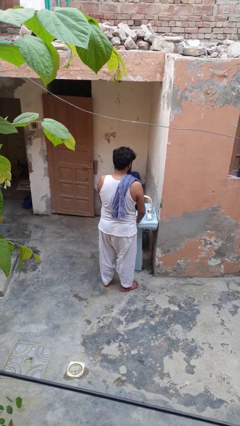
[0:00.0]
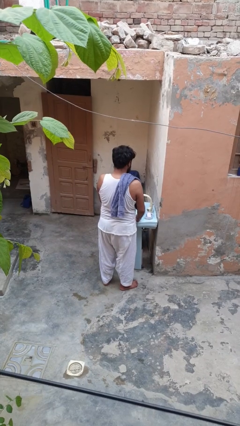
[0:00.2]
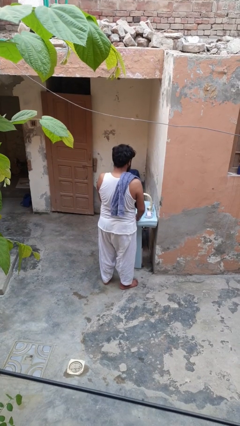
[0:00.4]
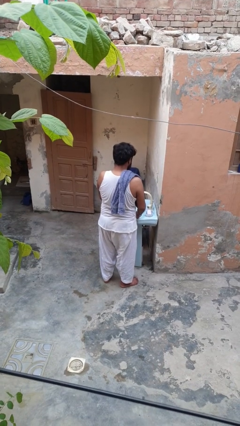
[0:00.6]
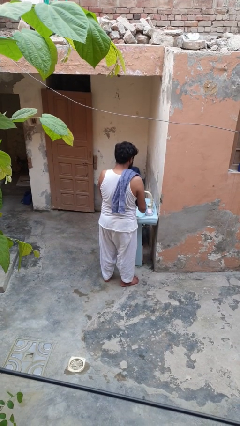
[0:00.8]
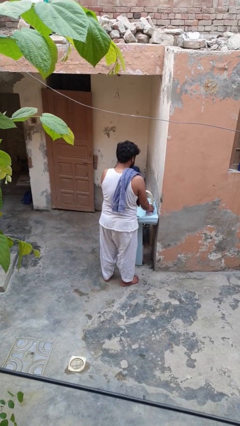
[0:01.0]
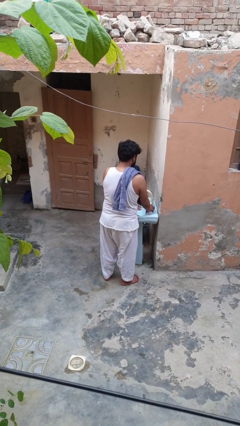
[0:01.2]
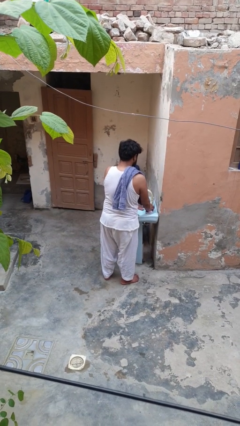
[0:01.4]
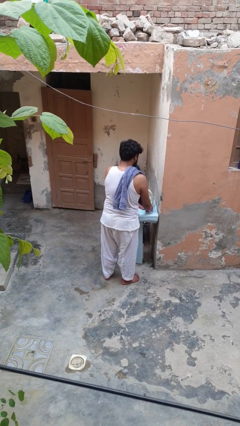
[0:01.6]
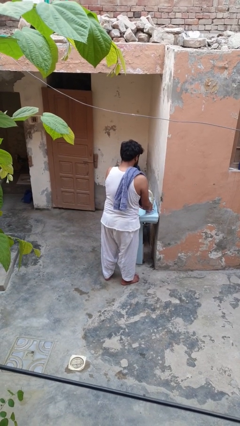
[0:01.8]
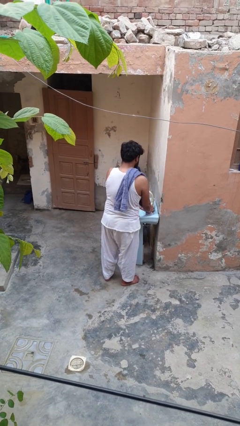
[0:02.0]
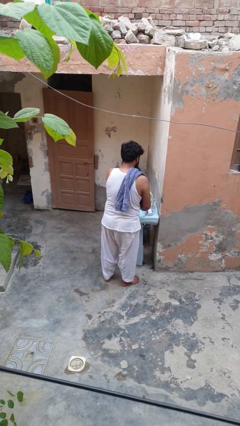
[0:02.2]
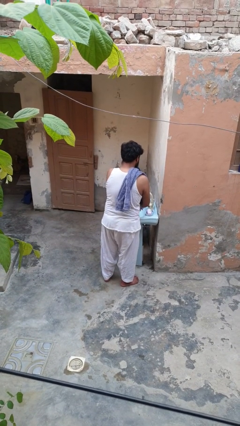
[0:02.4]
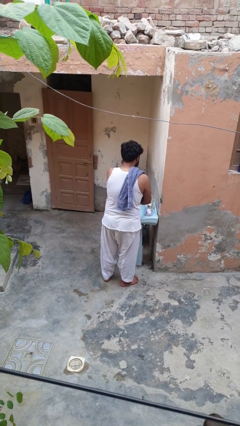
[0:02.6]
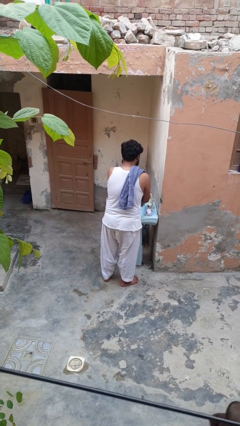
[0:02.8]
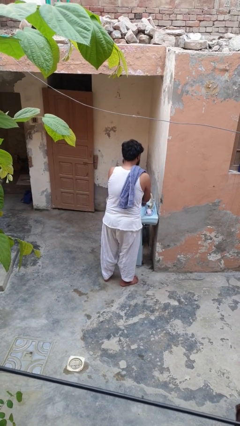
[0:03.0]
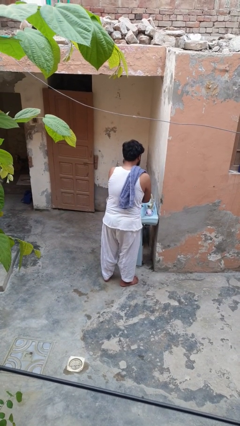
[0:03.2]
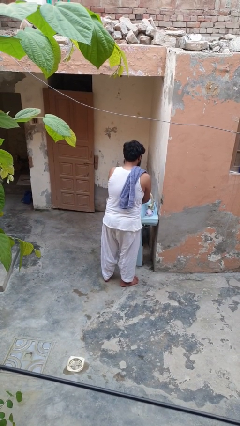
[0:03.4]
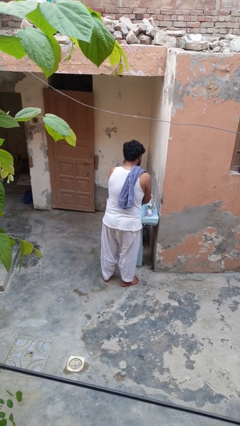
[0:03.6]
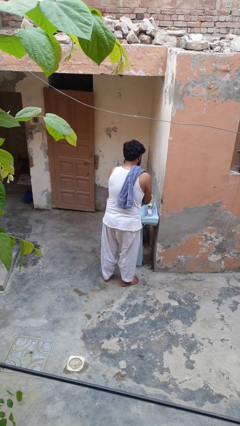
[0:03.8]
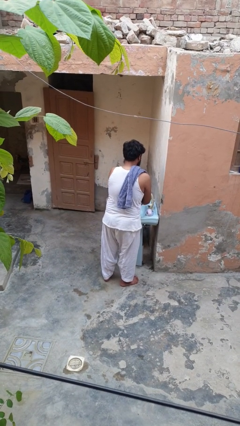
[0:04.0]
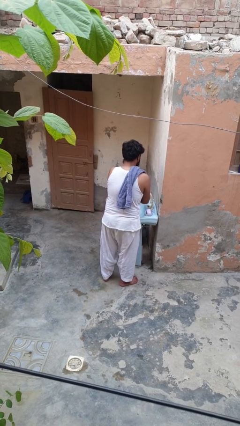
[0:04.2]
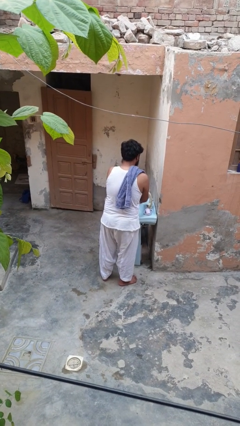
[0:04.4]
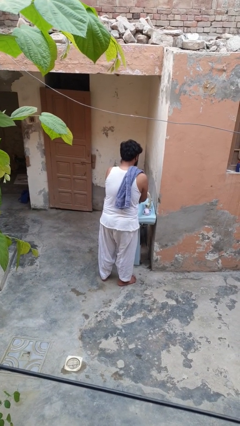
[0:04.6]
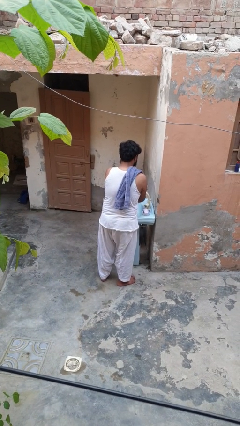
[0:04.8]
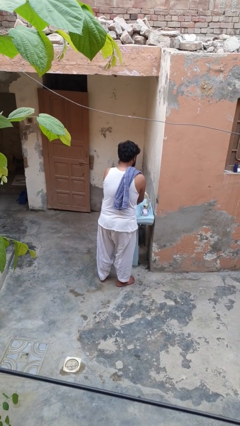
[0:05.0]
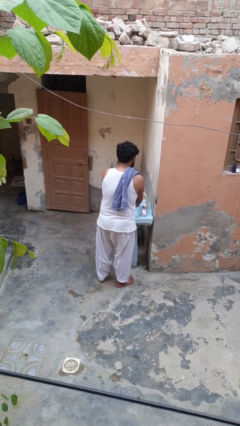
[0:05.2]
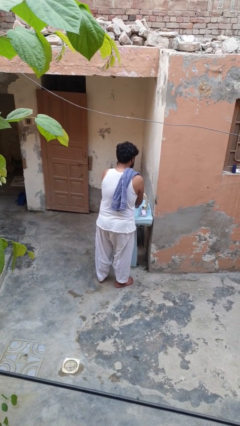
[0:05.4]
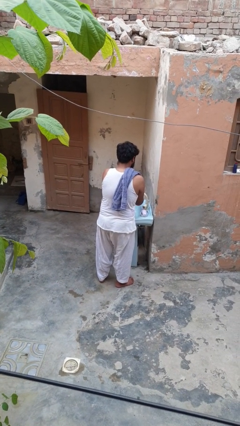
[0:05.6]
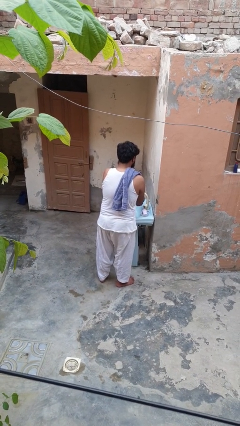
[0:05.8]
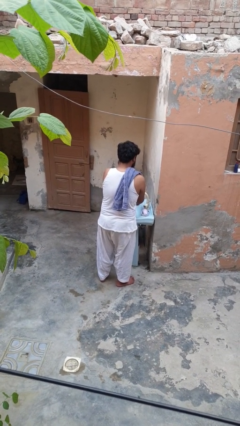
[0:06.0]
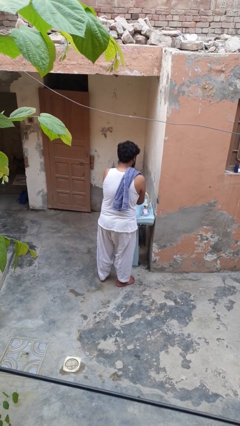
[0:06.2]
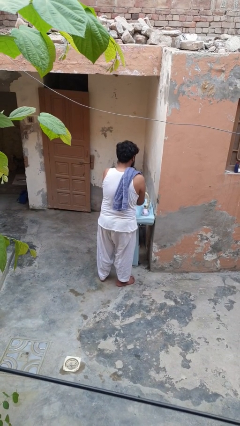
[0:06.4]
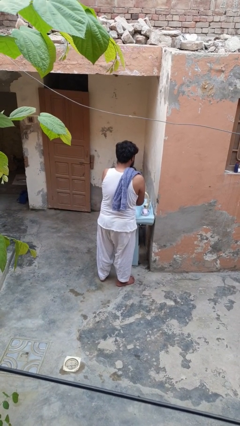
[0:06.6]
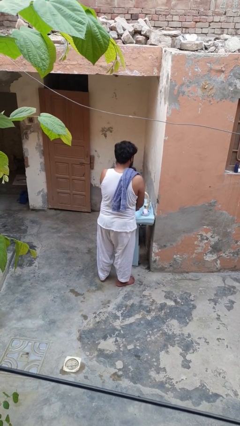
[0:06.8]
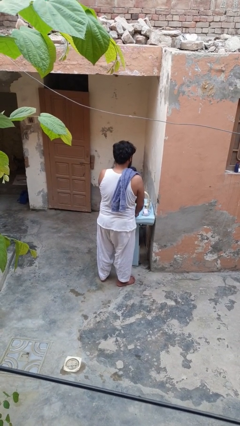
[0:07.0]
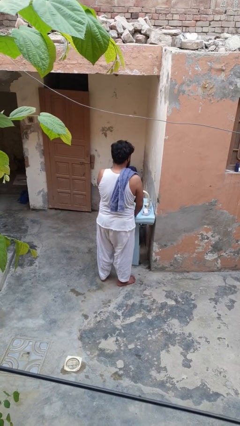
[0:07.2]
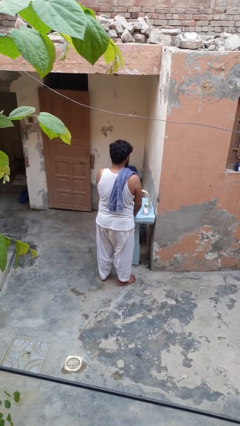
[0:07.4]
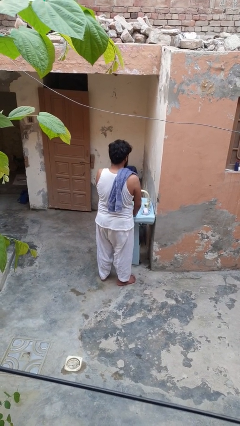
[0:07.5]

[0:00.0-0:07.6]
person washes hands

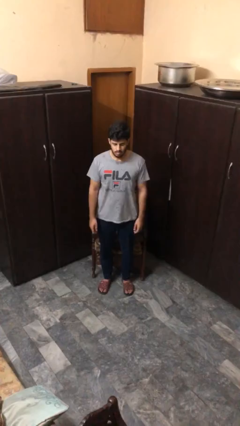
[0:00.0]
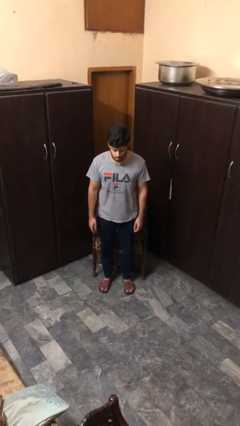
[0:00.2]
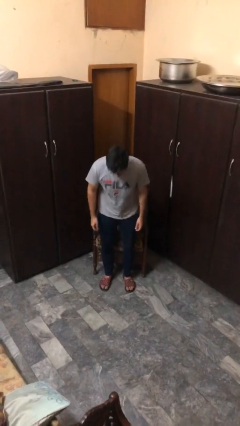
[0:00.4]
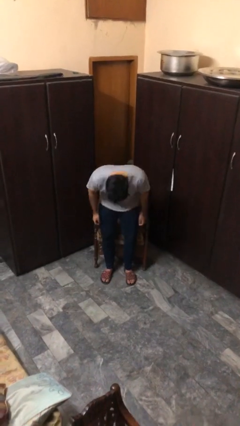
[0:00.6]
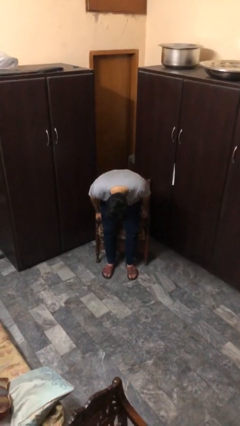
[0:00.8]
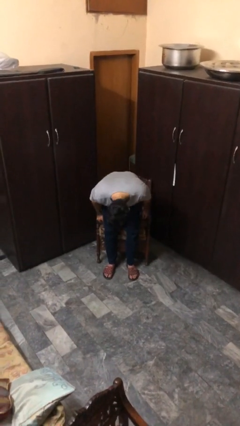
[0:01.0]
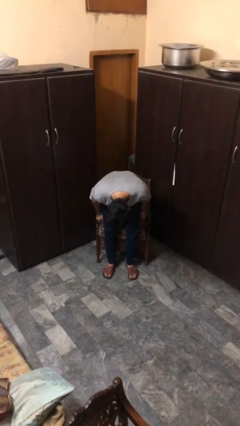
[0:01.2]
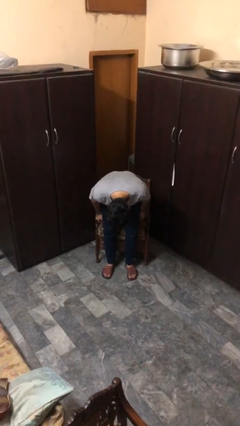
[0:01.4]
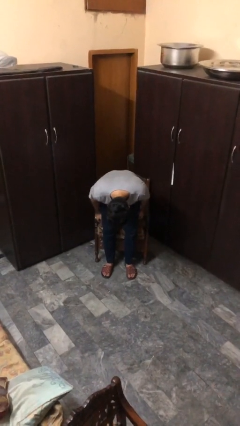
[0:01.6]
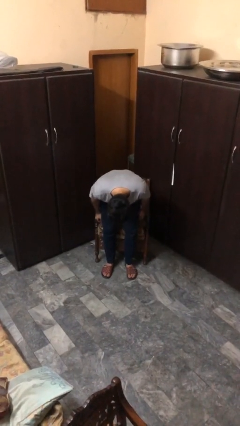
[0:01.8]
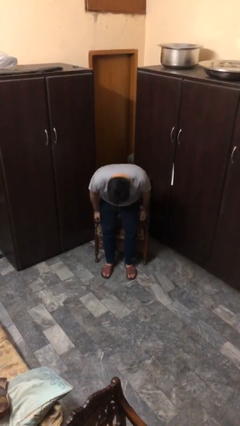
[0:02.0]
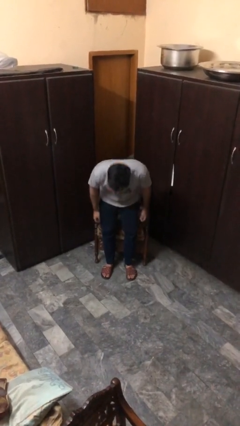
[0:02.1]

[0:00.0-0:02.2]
person bows

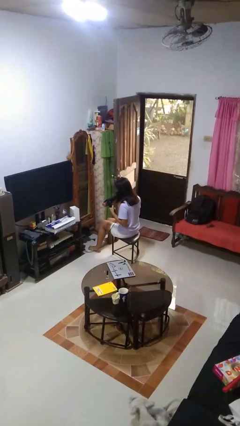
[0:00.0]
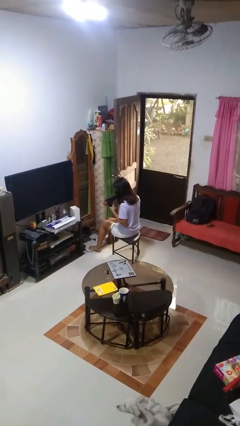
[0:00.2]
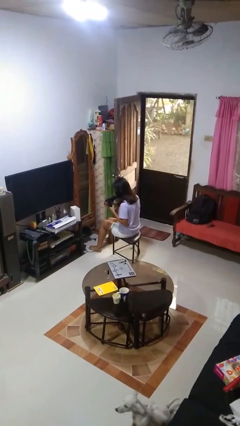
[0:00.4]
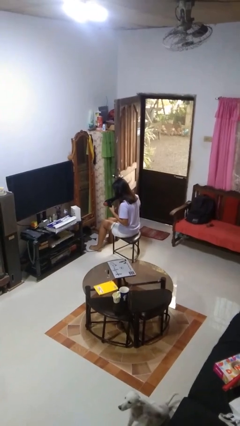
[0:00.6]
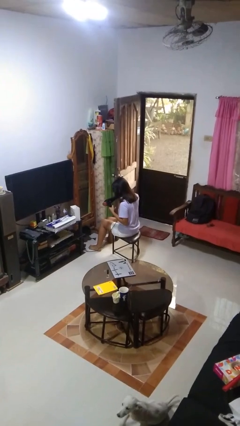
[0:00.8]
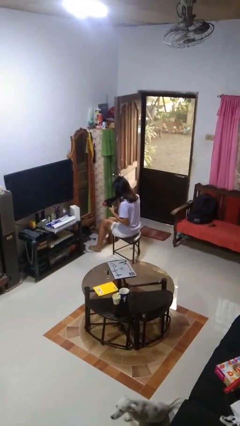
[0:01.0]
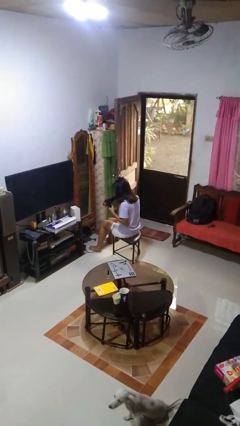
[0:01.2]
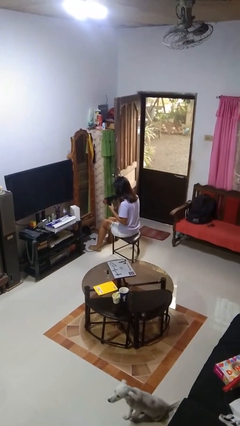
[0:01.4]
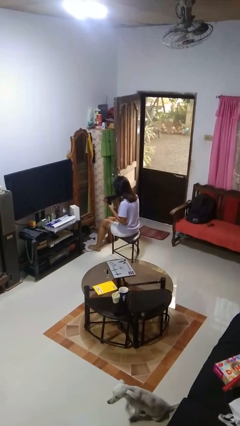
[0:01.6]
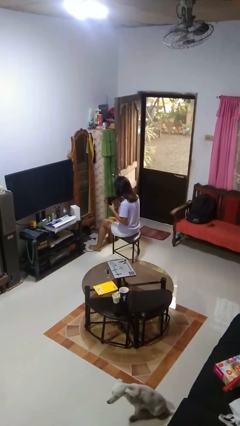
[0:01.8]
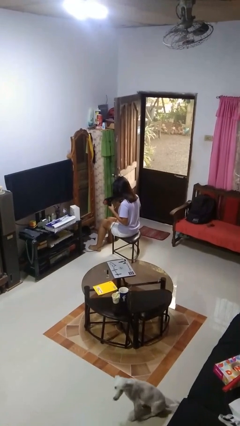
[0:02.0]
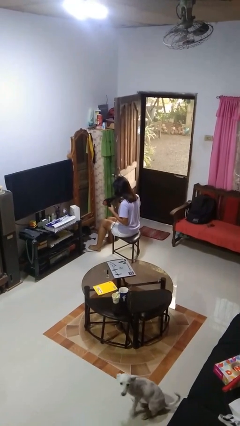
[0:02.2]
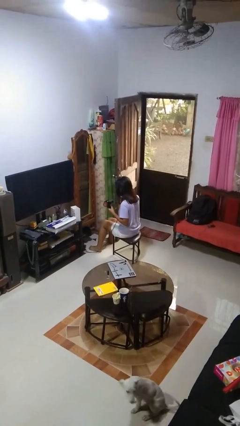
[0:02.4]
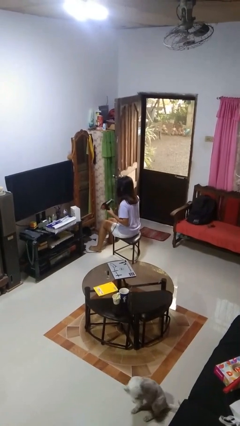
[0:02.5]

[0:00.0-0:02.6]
person dries hair with hairdryer

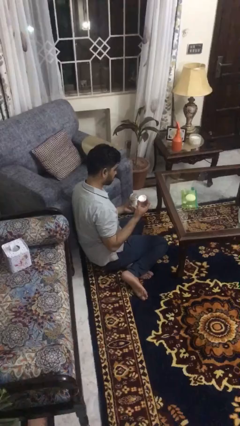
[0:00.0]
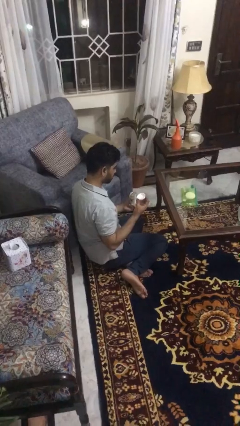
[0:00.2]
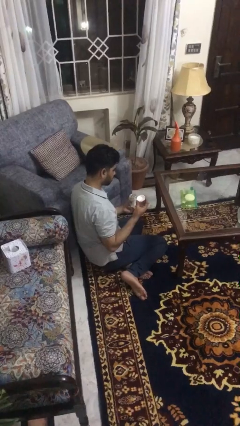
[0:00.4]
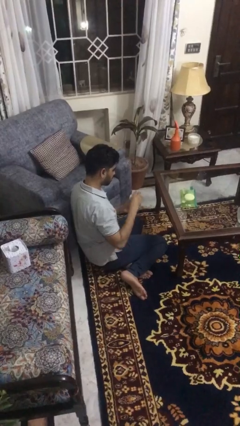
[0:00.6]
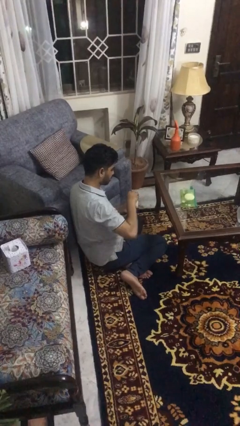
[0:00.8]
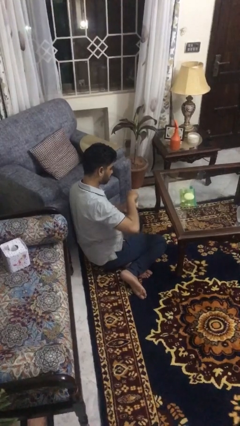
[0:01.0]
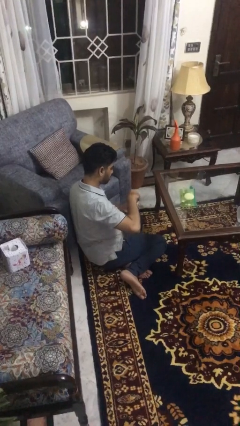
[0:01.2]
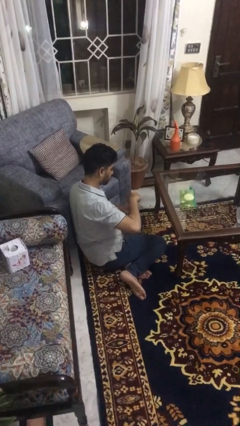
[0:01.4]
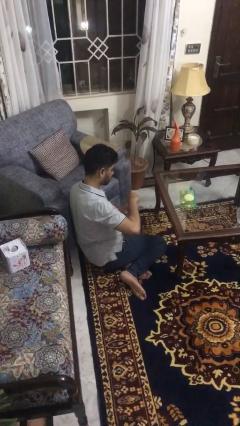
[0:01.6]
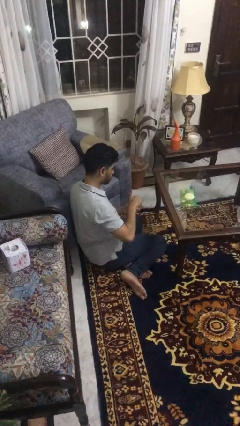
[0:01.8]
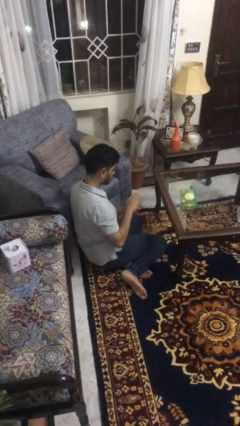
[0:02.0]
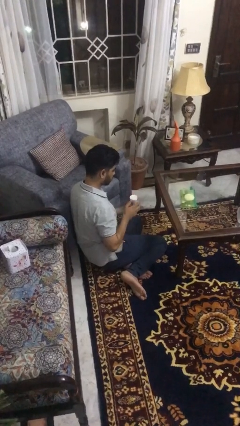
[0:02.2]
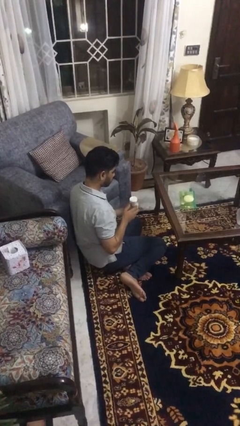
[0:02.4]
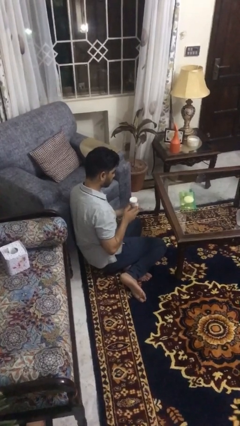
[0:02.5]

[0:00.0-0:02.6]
person closes jar

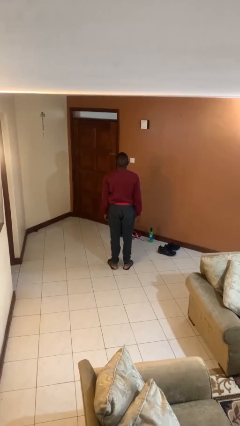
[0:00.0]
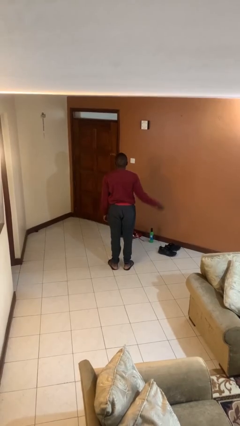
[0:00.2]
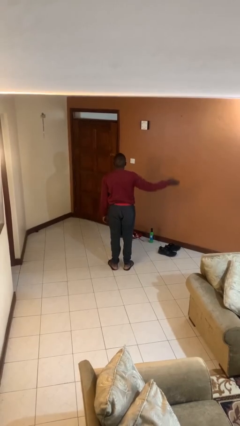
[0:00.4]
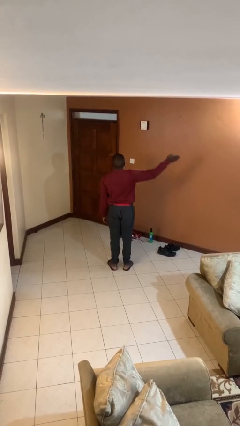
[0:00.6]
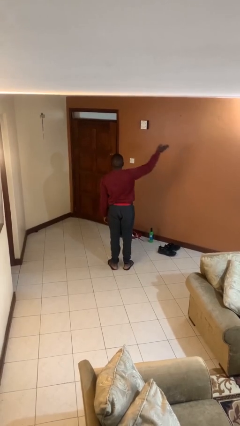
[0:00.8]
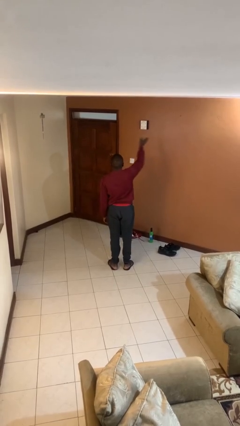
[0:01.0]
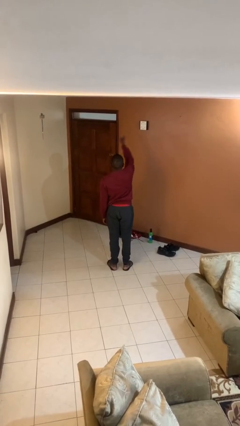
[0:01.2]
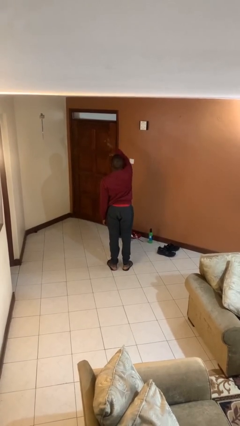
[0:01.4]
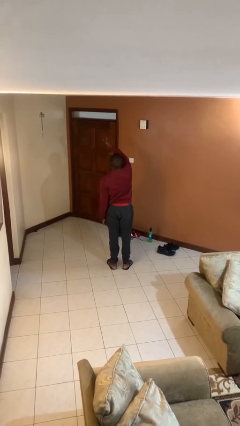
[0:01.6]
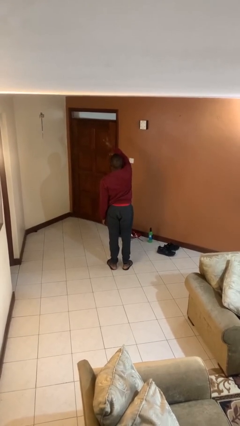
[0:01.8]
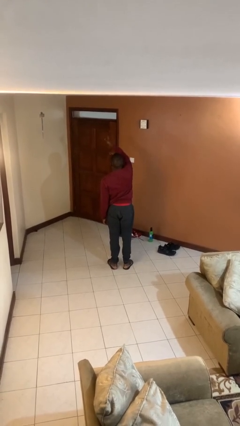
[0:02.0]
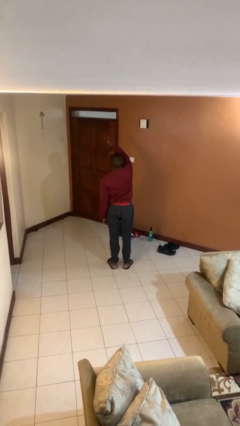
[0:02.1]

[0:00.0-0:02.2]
person gestures swipe left

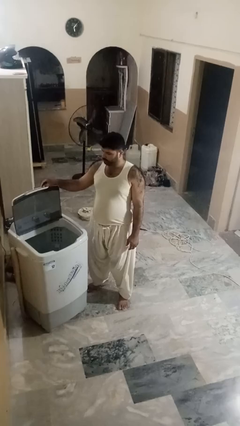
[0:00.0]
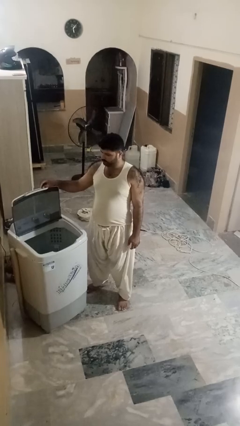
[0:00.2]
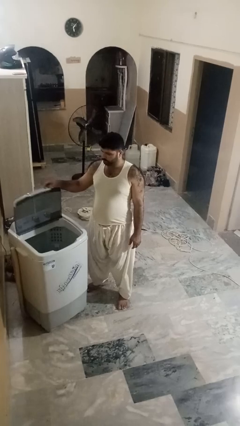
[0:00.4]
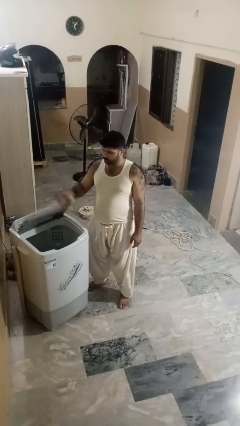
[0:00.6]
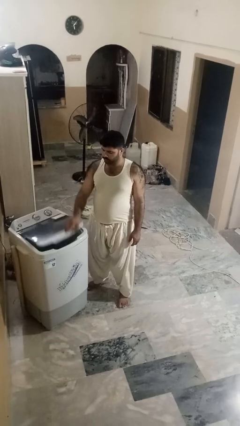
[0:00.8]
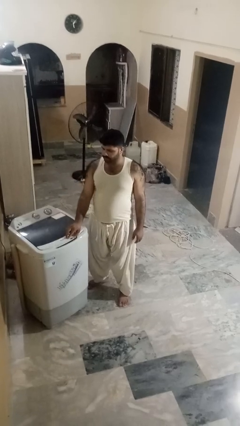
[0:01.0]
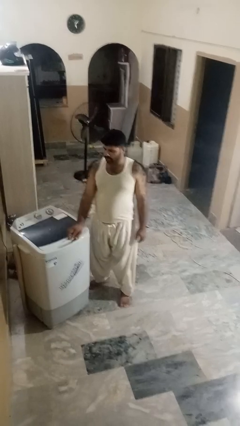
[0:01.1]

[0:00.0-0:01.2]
person closes clothes washer
